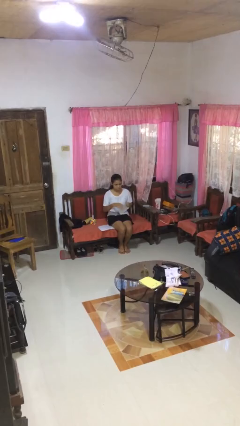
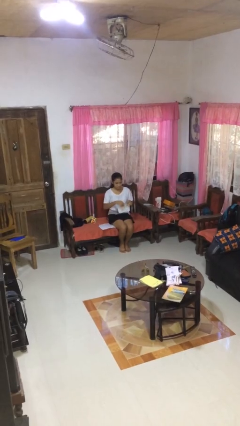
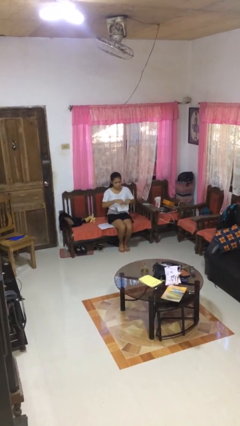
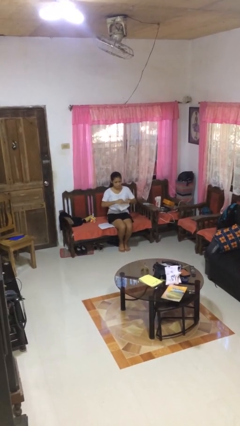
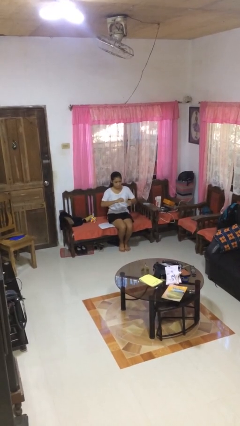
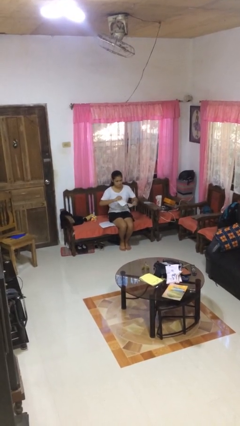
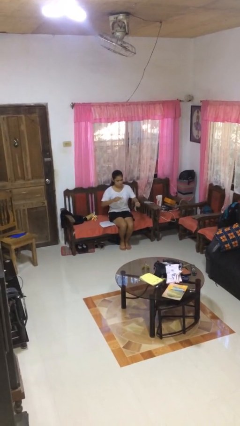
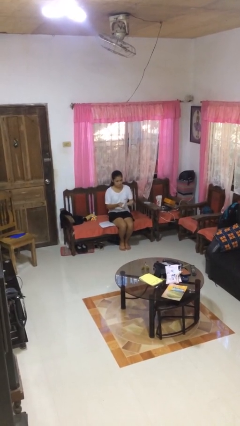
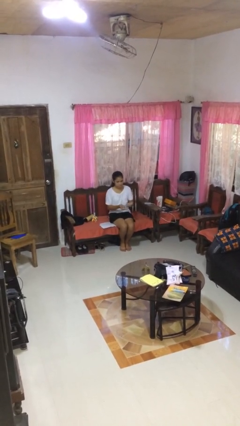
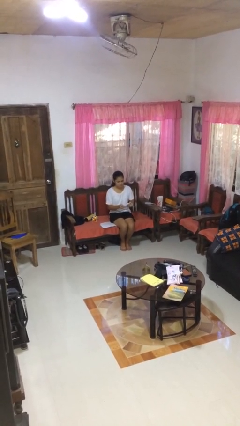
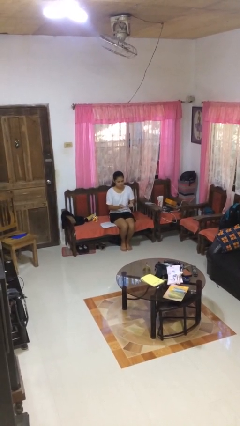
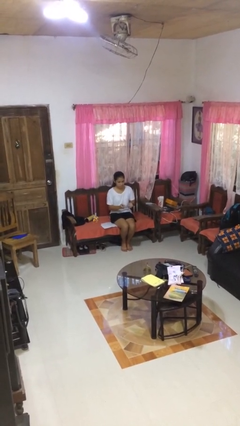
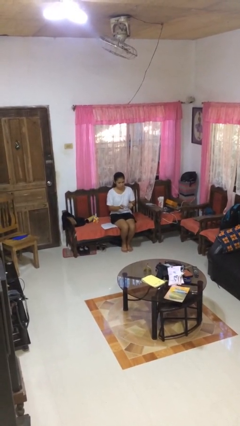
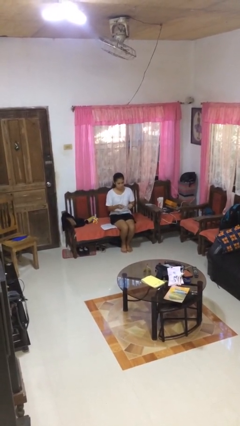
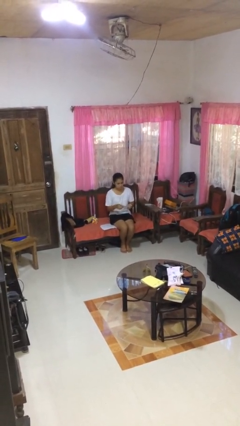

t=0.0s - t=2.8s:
person tears paper

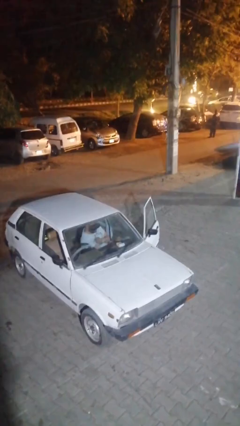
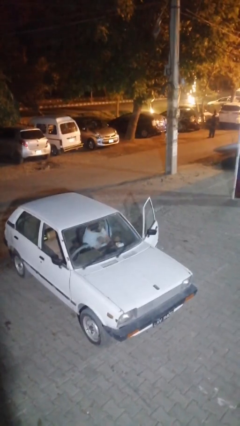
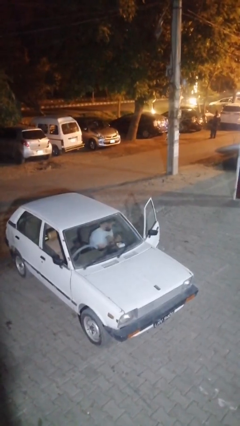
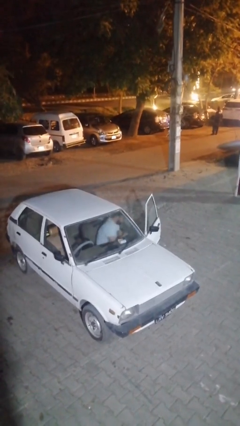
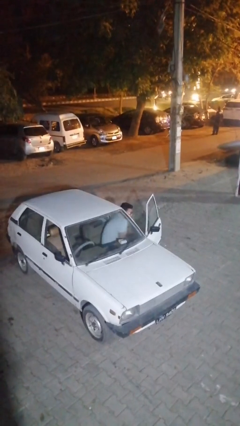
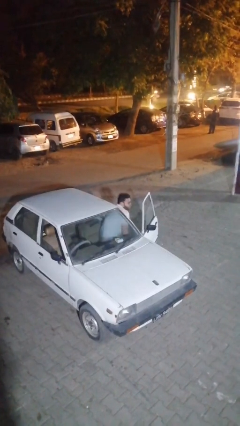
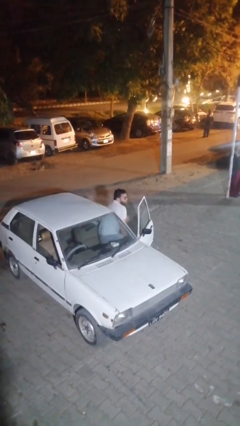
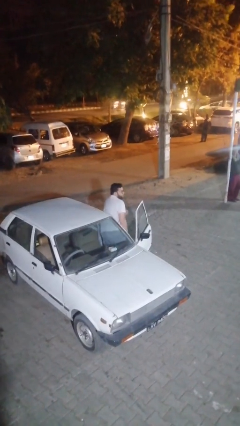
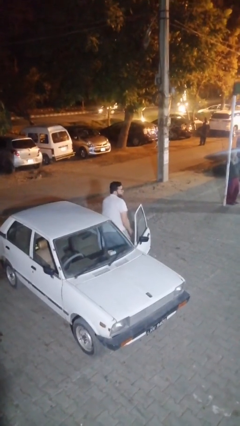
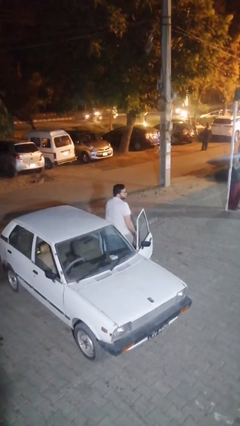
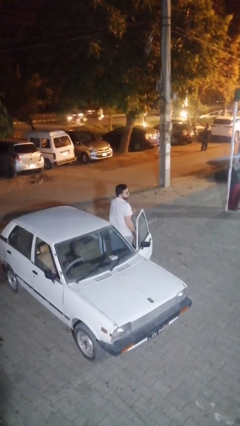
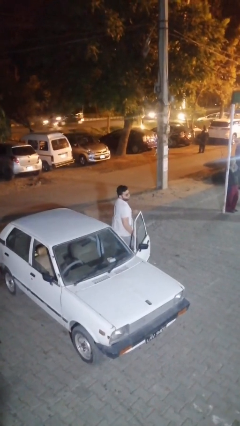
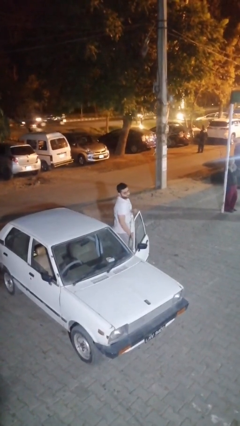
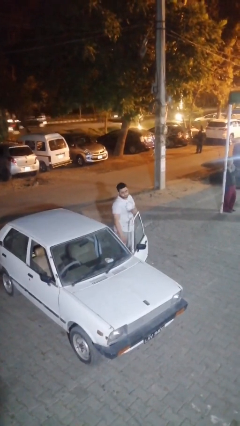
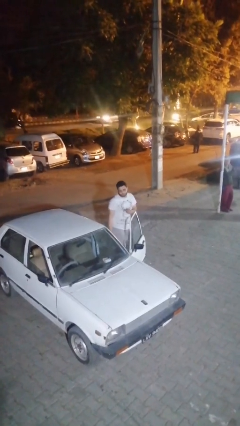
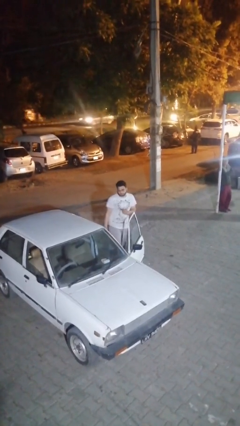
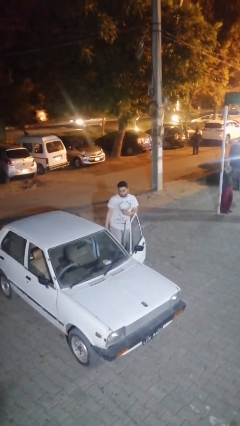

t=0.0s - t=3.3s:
person exits car

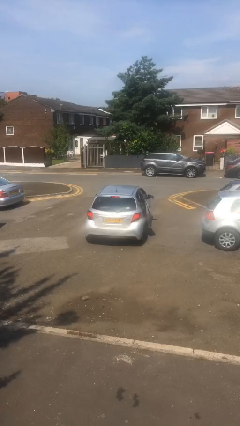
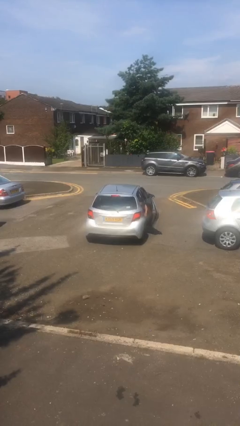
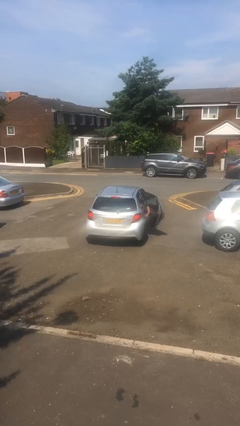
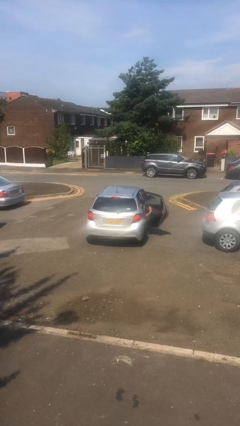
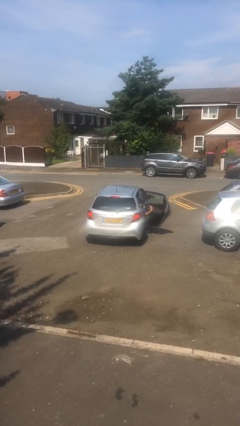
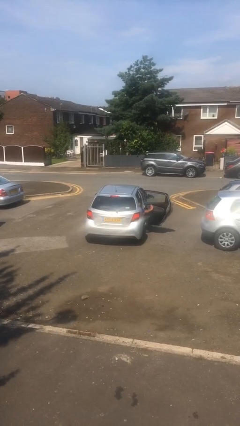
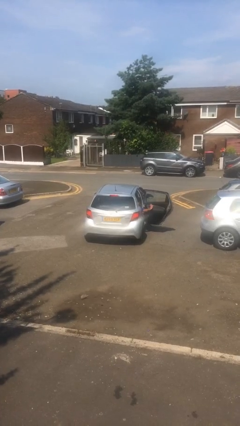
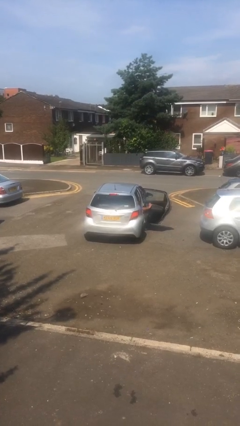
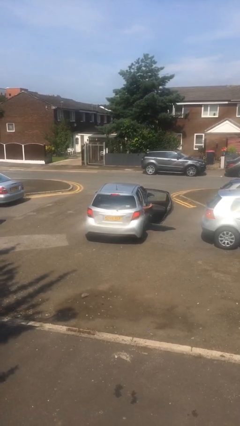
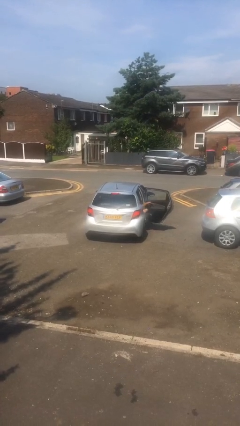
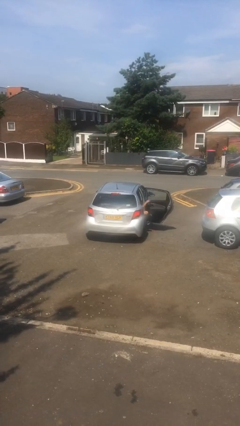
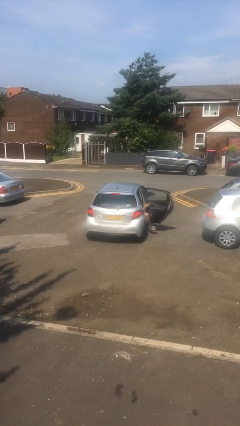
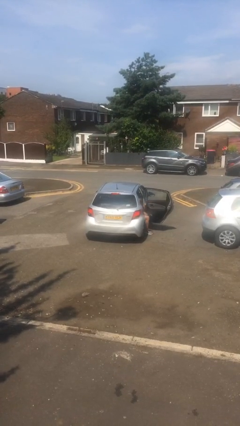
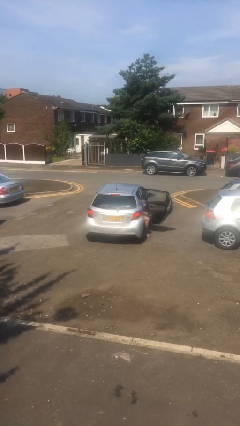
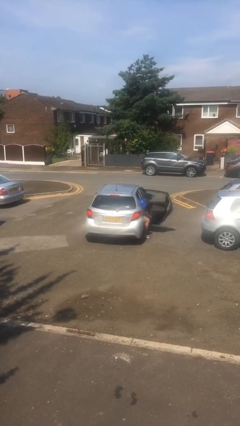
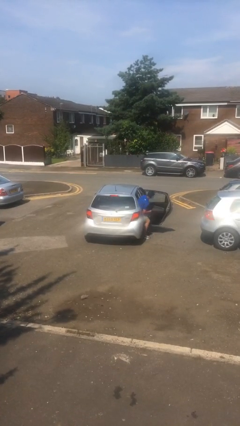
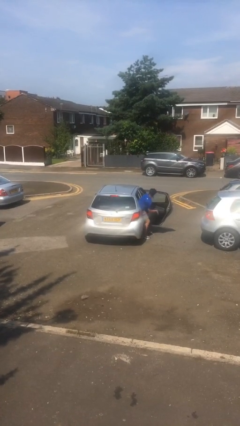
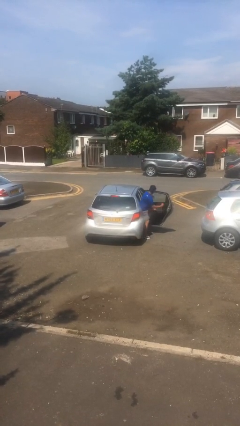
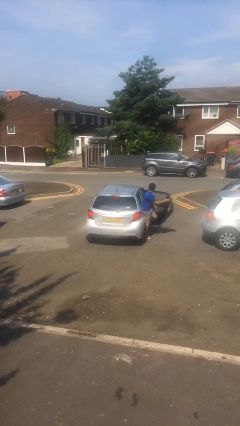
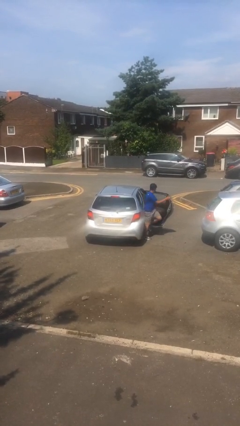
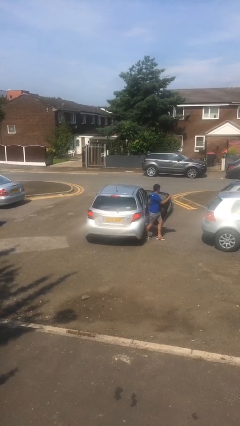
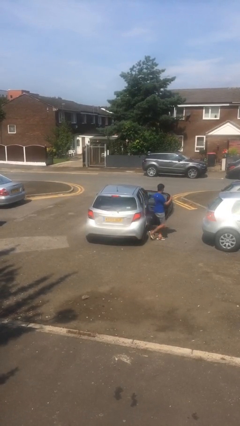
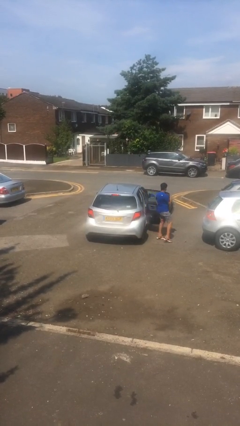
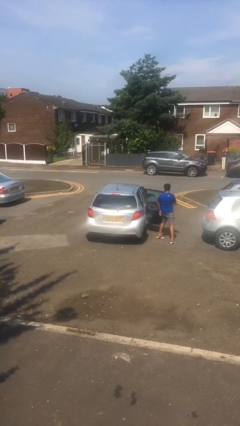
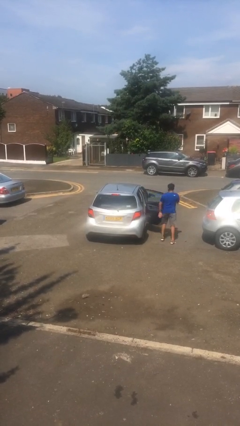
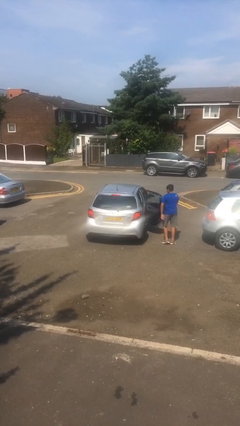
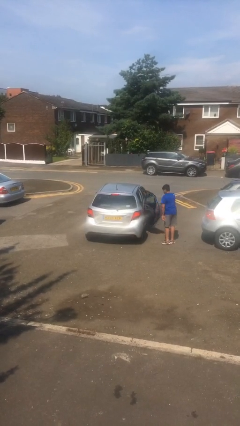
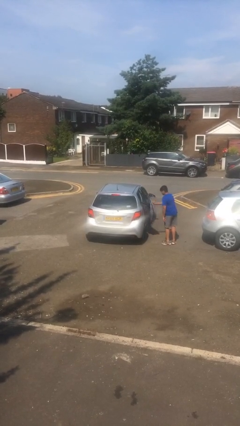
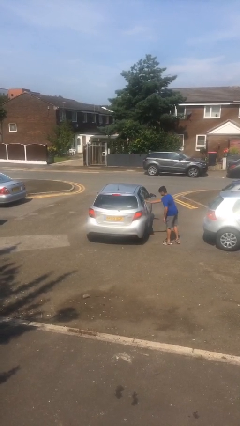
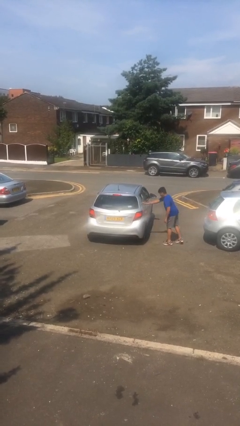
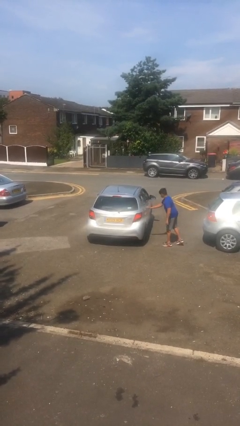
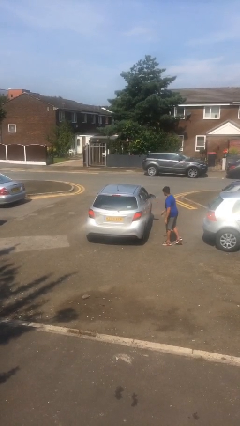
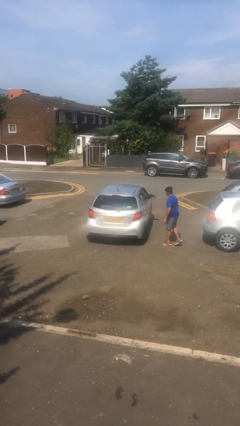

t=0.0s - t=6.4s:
car drops off person

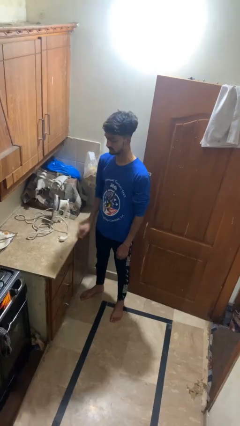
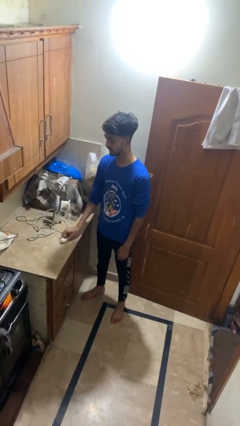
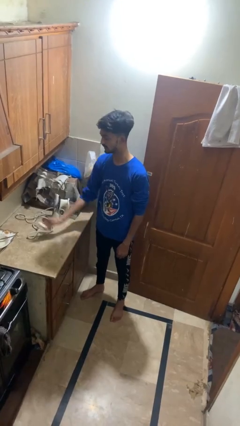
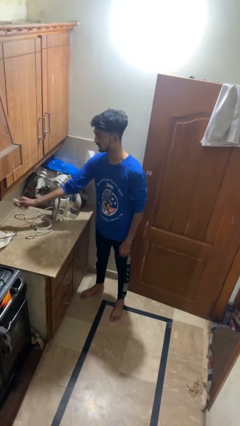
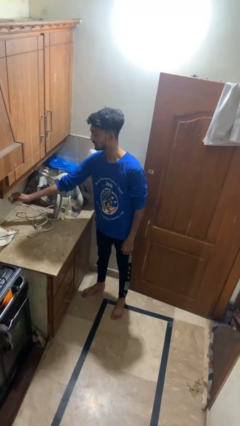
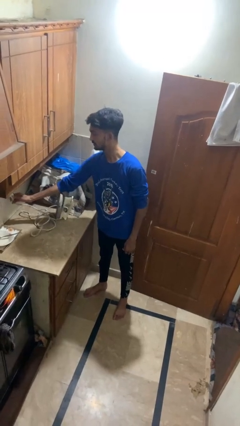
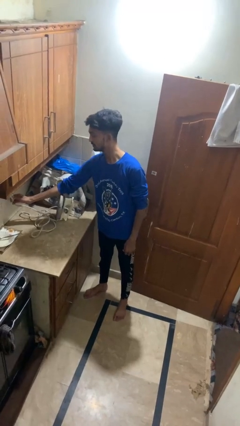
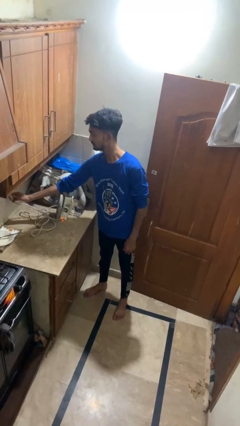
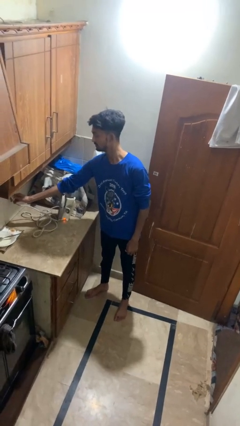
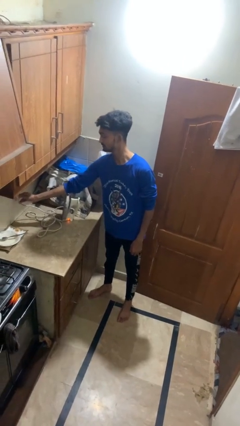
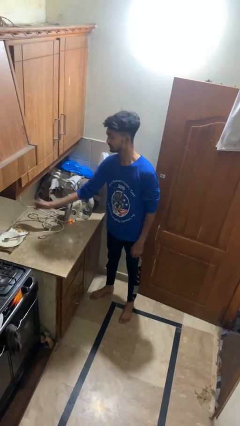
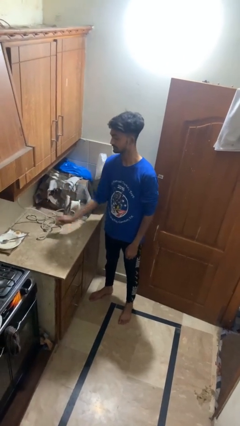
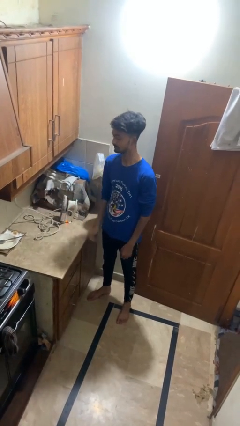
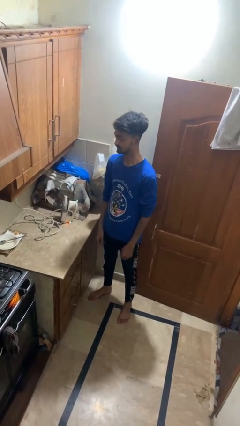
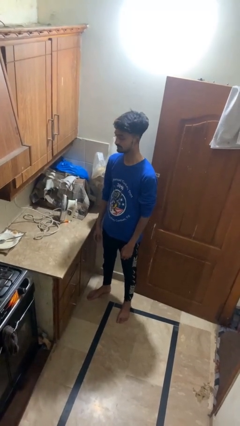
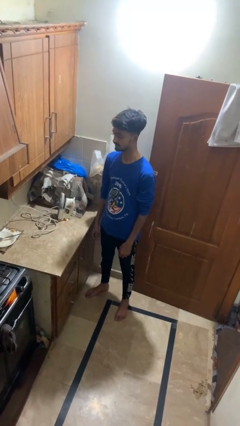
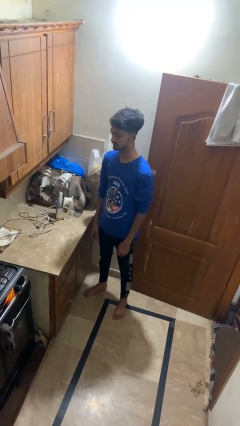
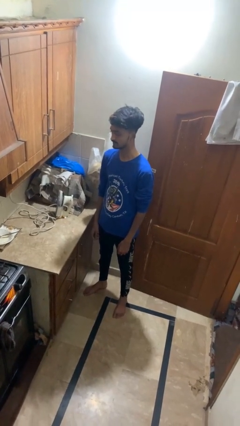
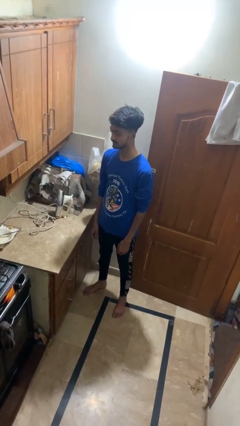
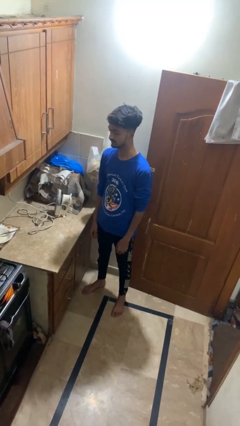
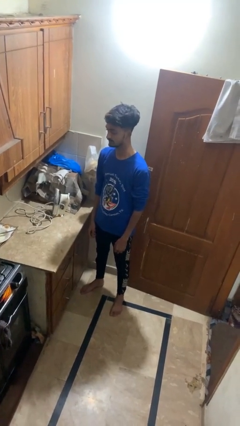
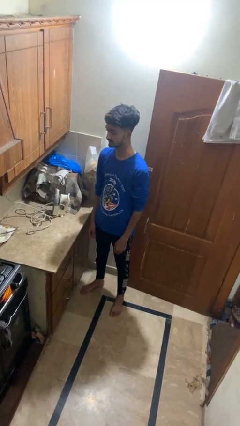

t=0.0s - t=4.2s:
person plugs into electrical socket

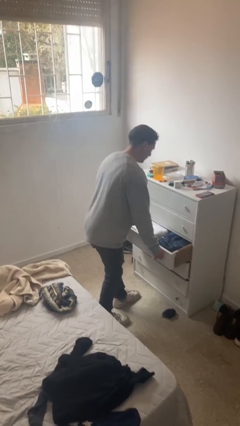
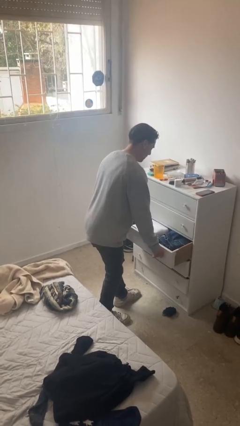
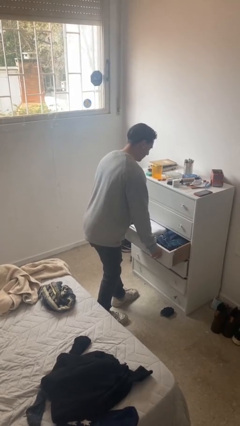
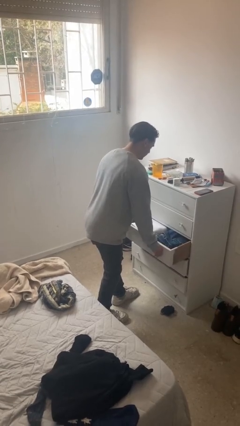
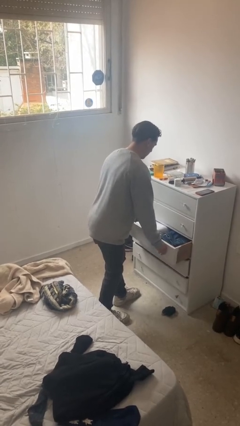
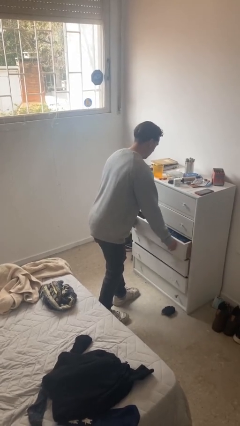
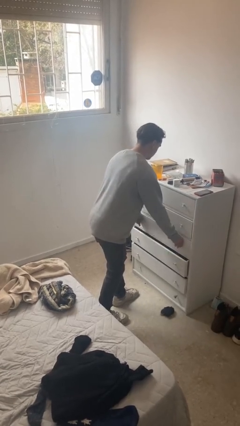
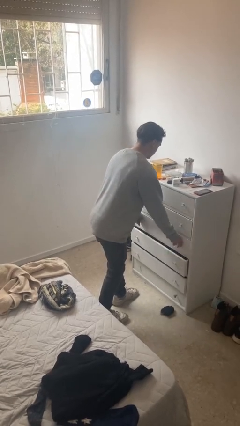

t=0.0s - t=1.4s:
person closes dresser drawer
